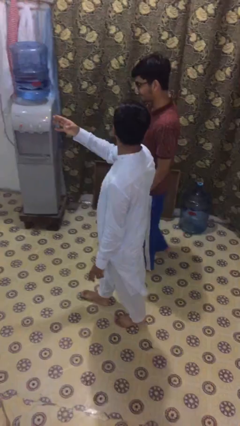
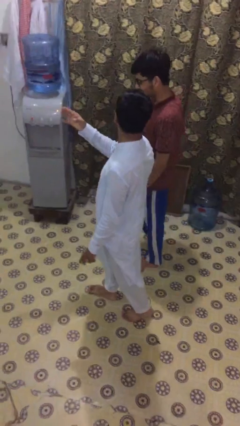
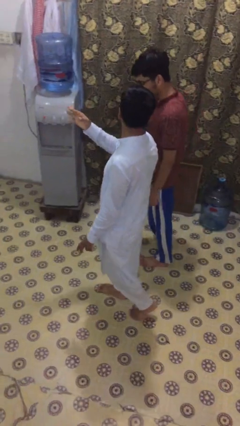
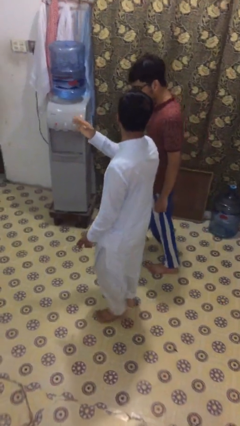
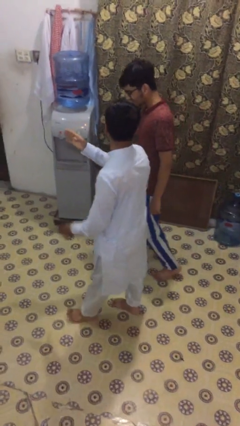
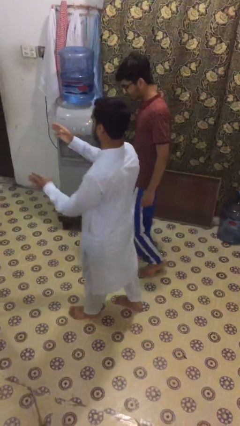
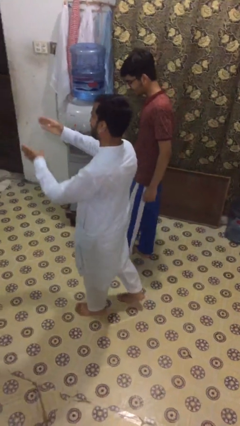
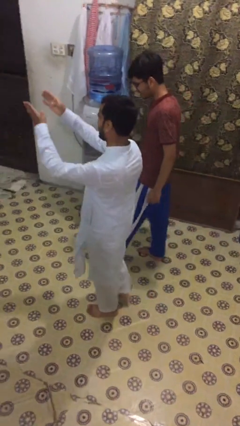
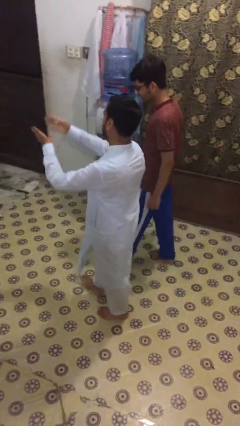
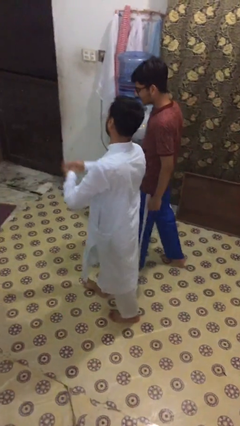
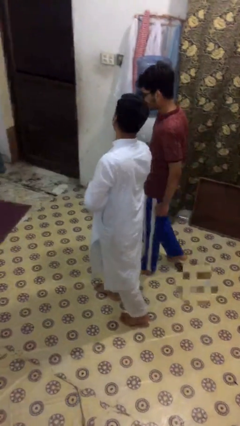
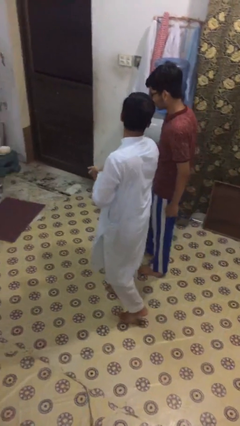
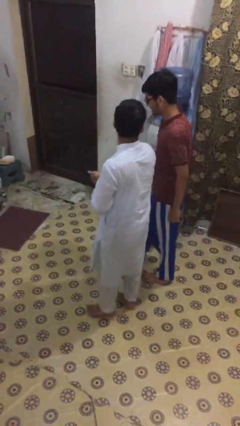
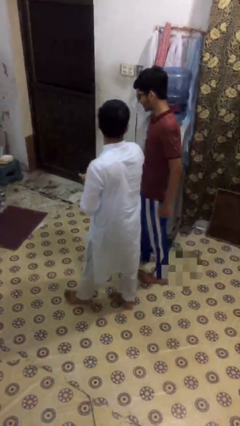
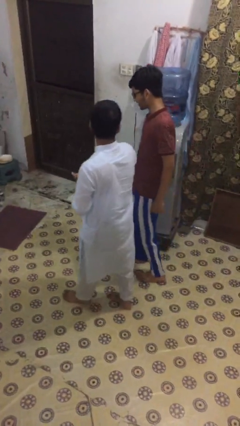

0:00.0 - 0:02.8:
person talks to person

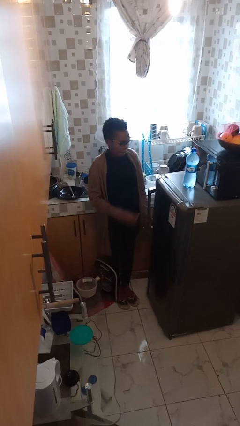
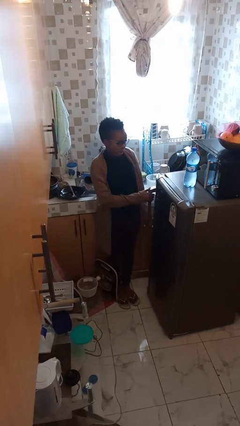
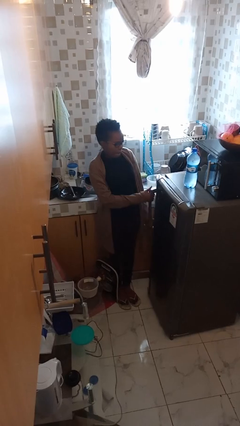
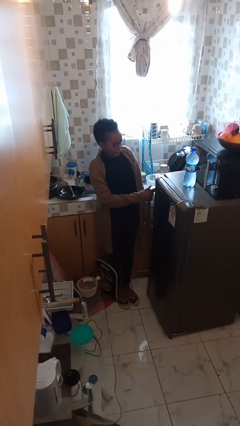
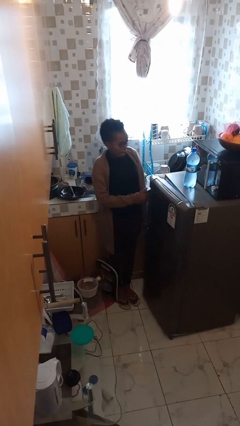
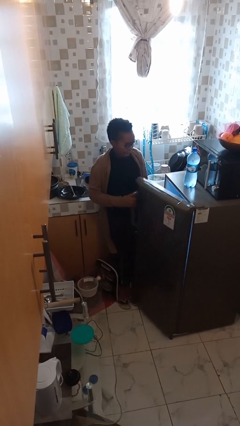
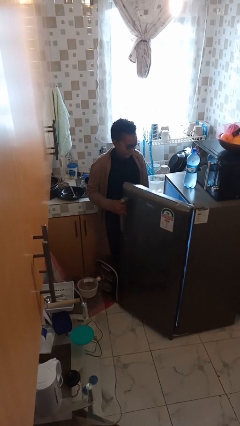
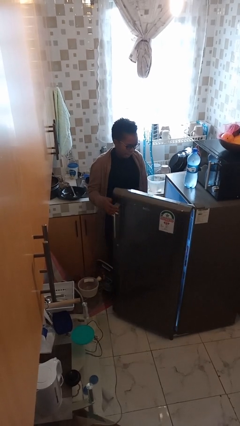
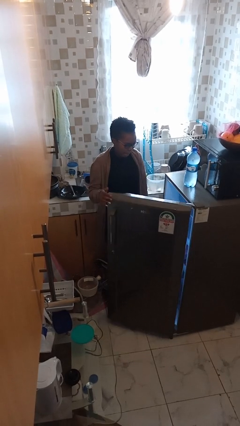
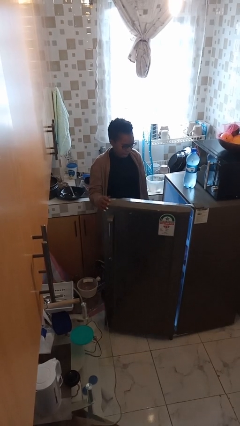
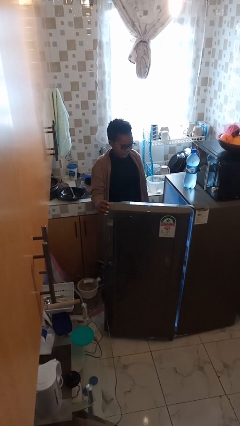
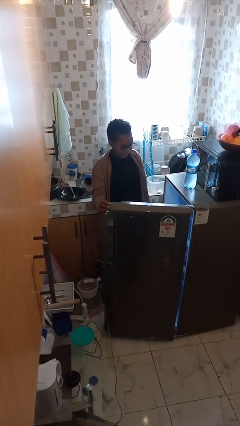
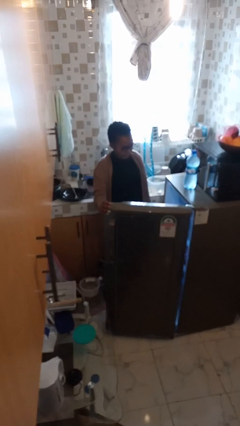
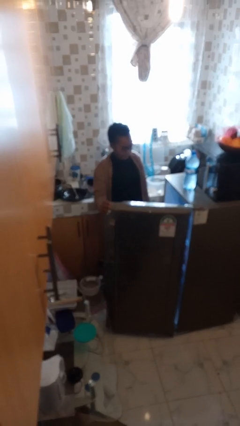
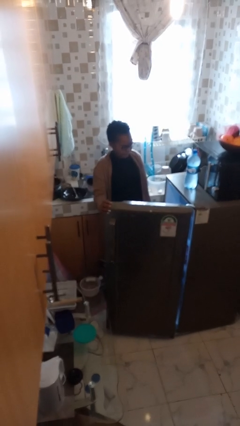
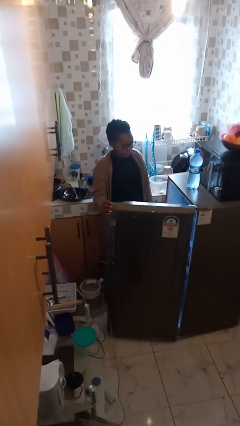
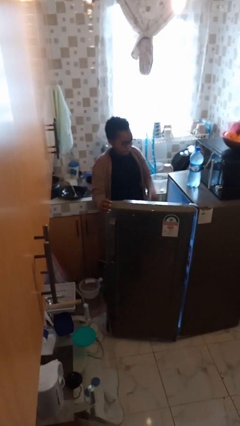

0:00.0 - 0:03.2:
person opens refrigerator

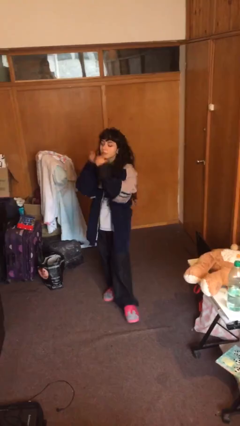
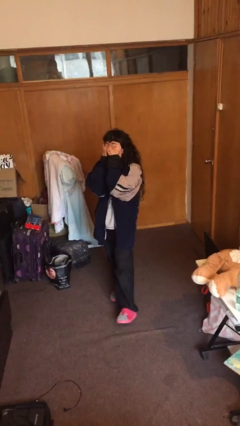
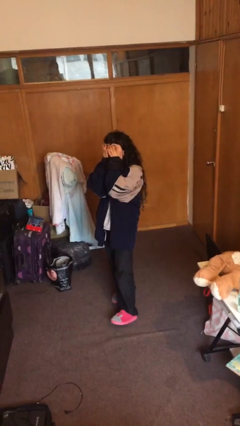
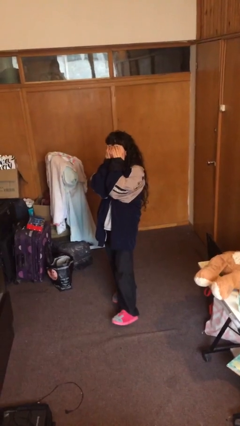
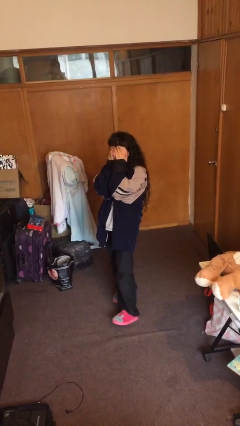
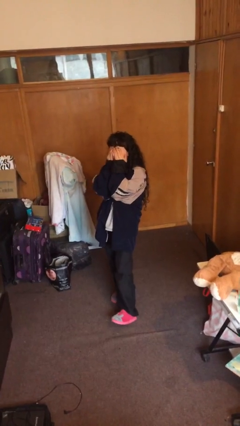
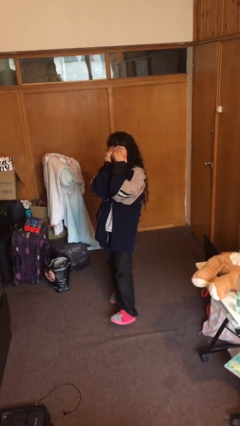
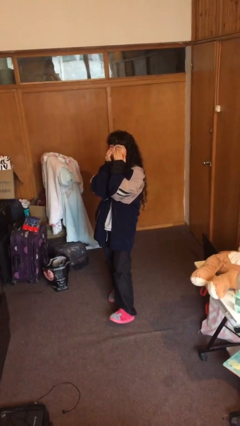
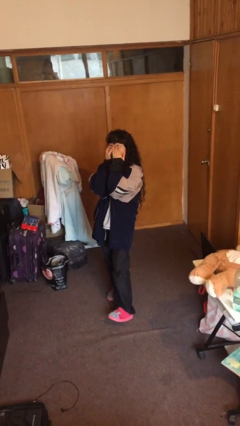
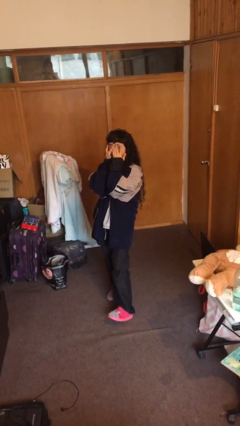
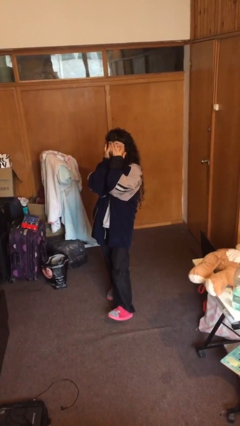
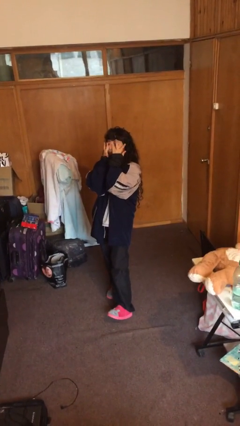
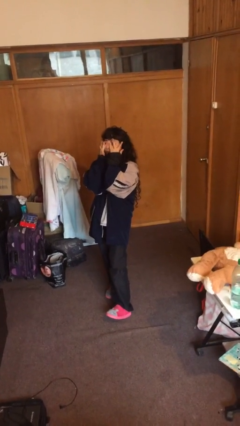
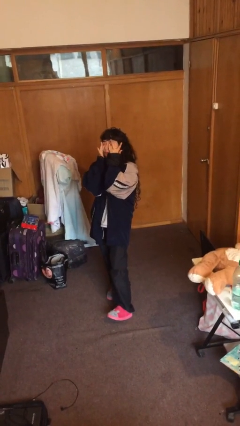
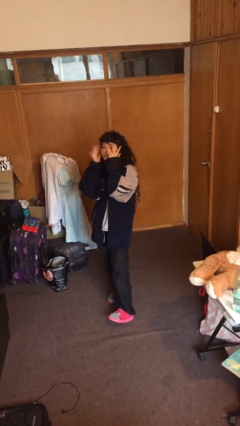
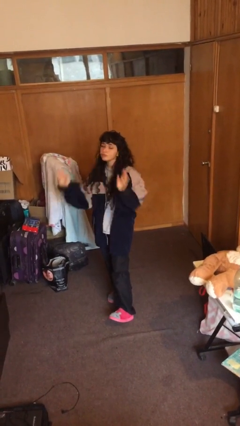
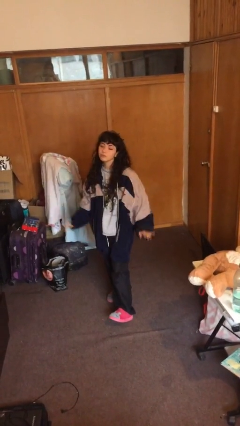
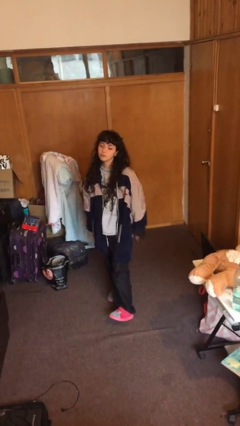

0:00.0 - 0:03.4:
person rubs eyes

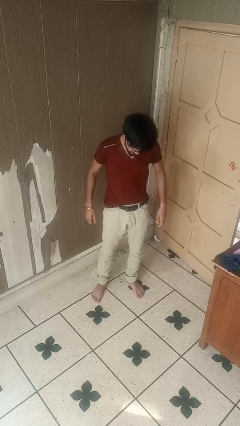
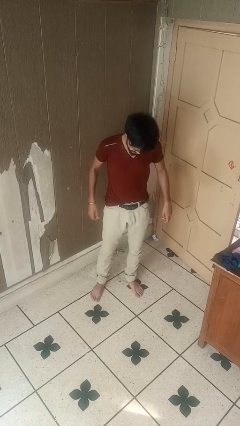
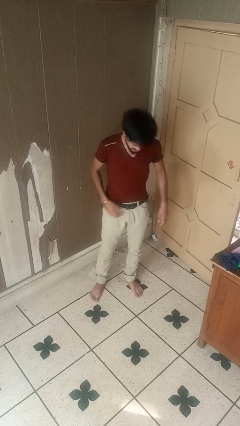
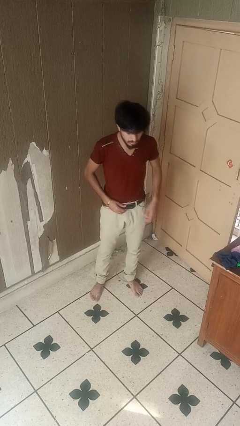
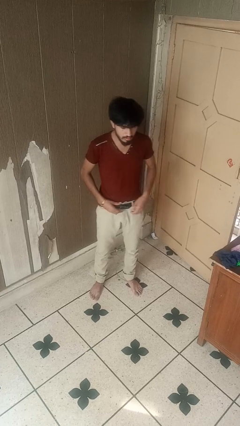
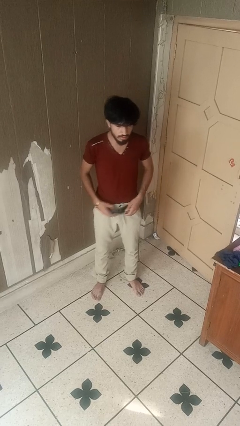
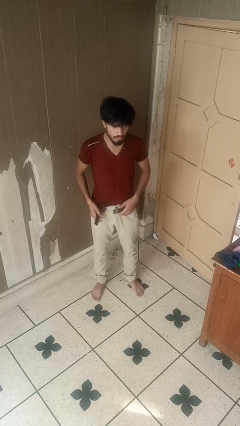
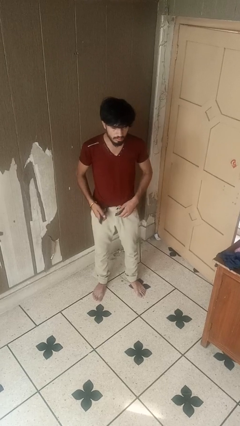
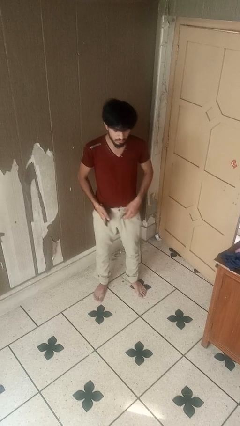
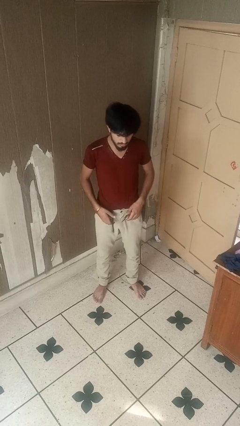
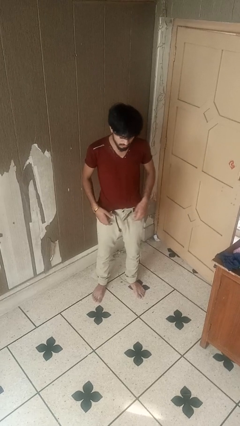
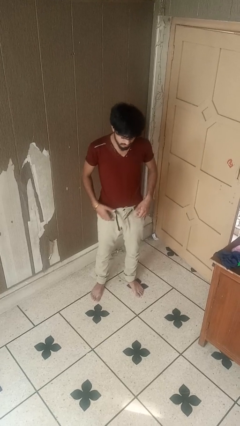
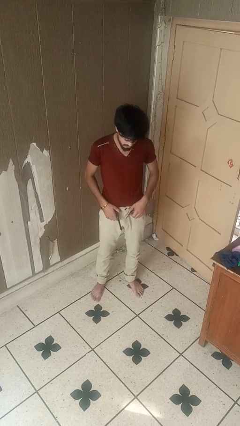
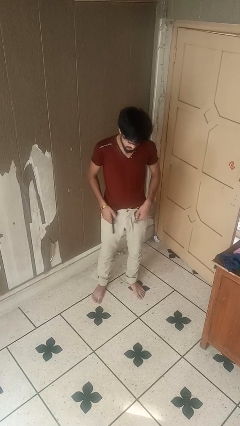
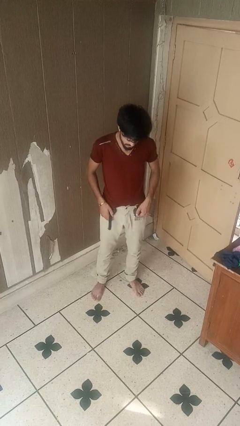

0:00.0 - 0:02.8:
person takes off belt

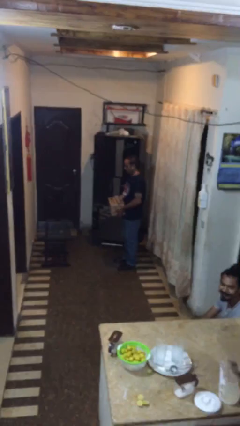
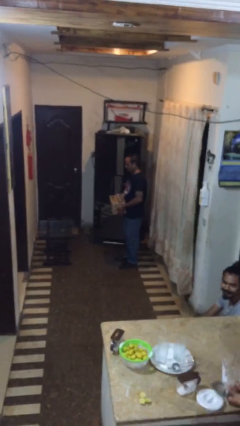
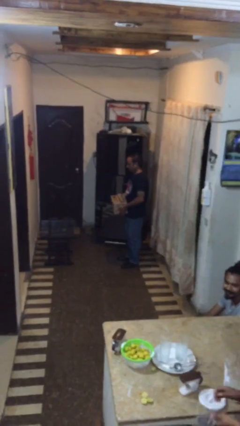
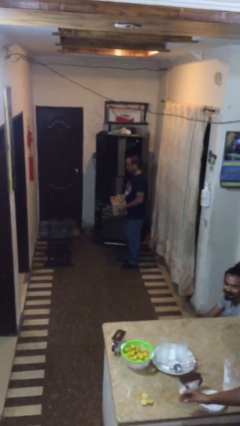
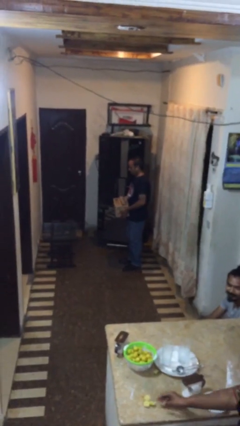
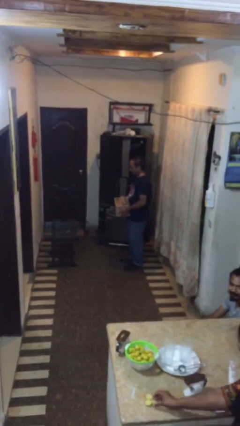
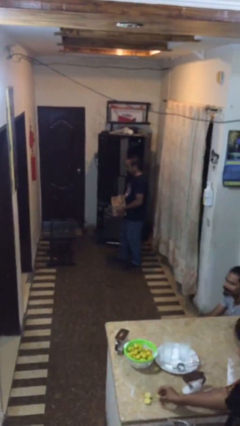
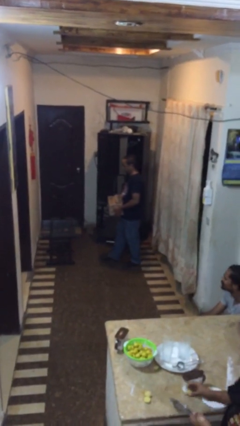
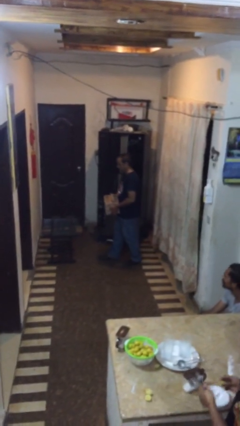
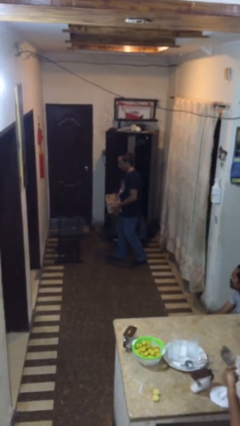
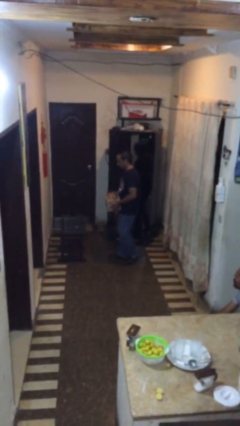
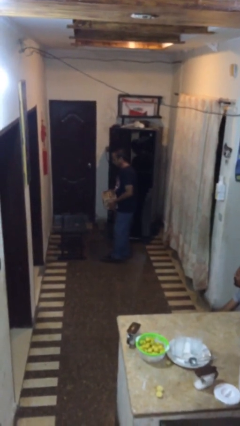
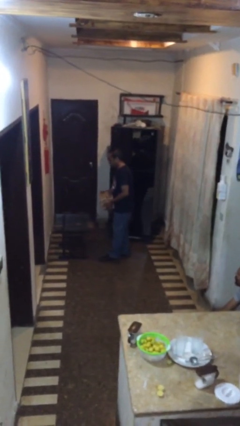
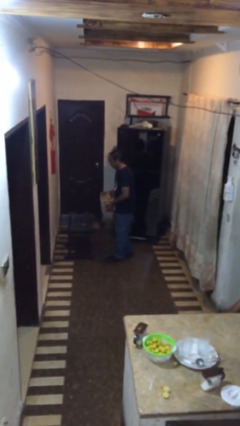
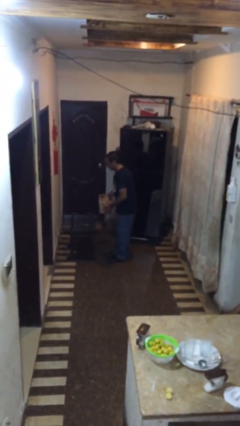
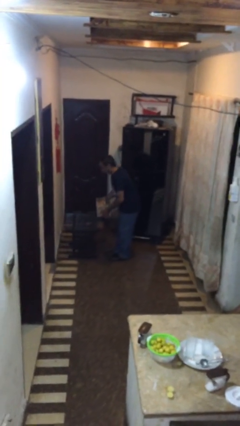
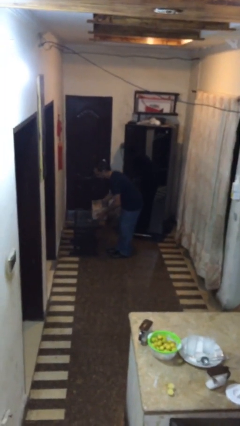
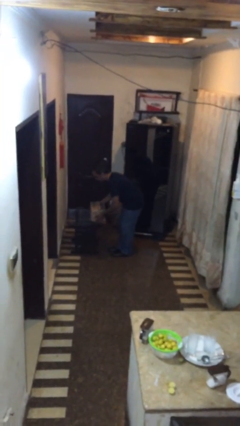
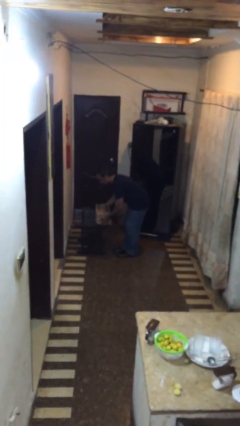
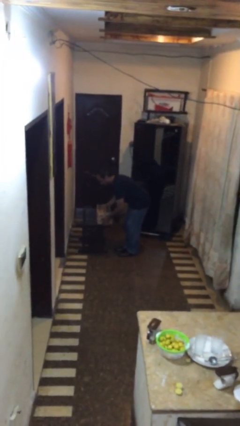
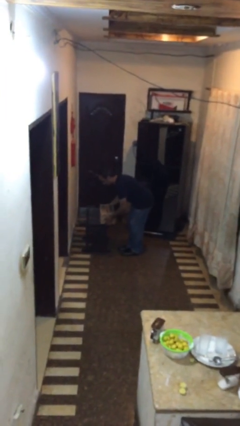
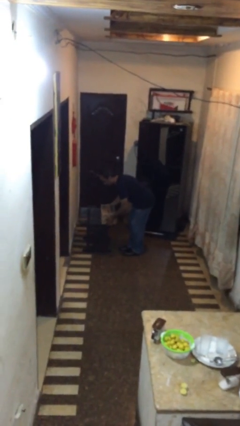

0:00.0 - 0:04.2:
person puts down object on table

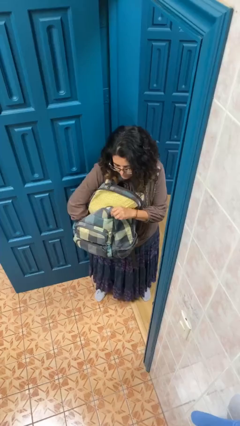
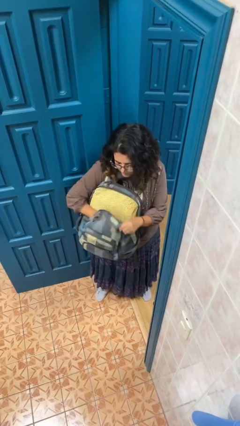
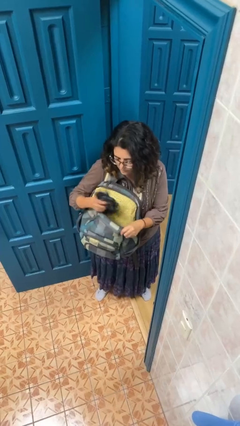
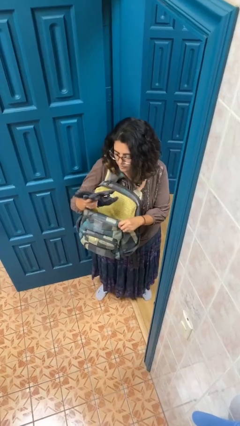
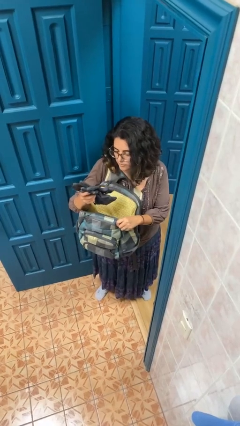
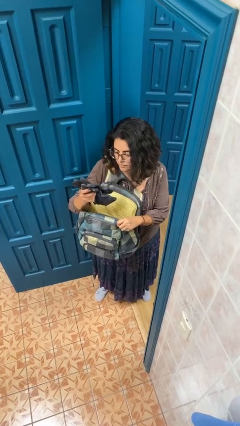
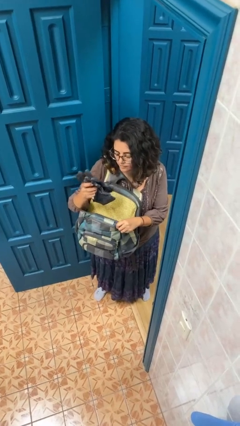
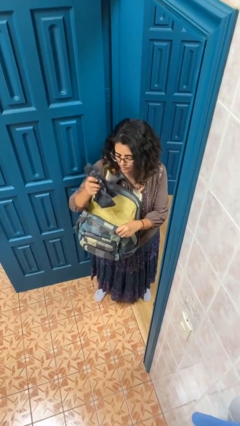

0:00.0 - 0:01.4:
person takes object from backpack
